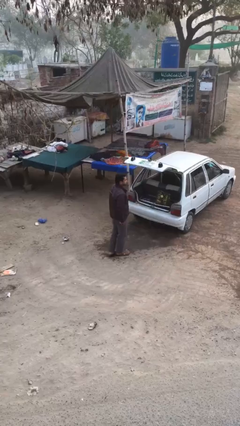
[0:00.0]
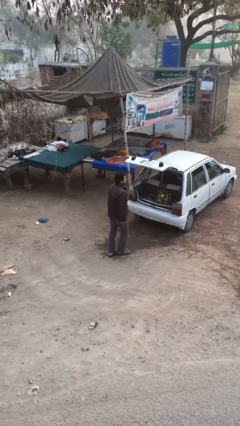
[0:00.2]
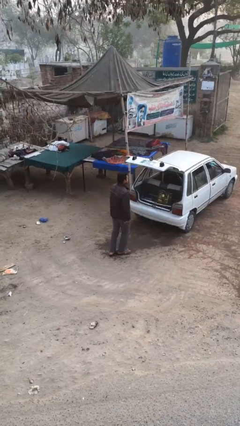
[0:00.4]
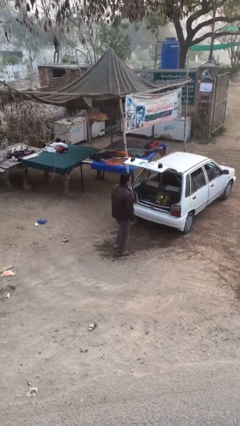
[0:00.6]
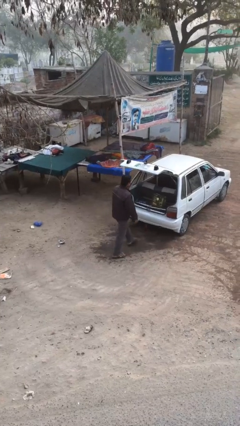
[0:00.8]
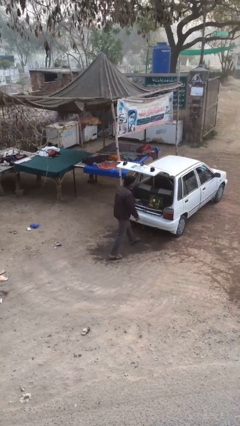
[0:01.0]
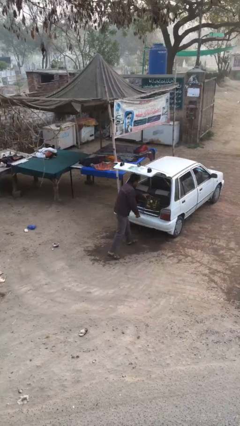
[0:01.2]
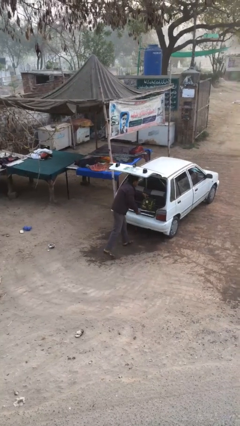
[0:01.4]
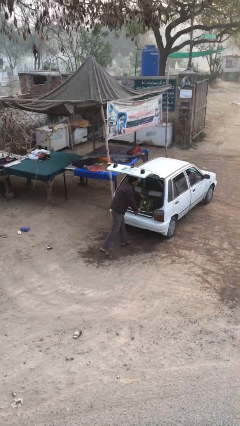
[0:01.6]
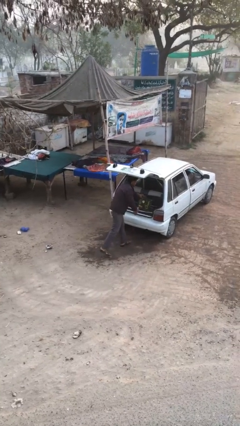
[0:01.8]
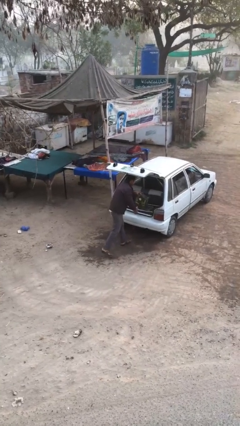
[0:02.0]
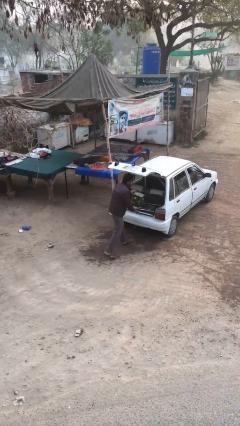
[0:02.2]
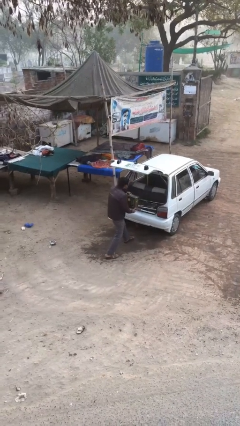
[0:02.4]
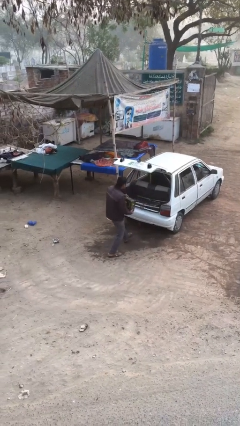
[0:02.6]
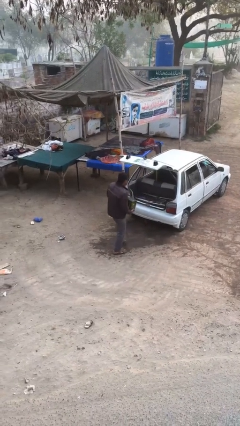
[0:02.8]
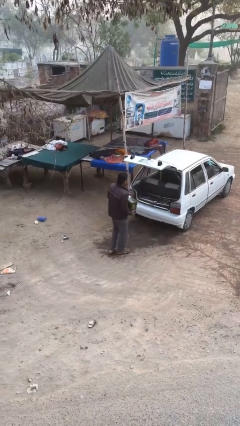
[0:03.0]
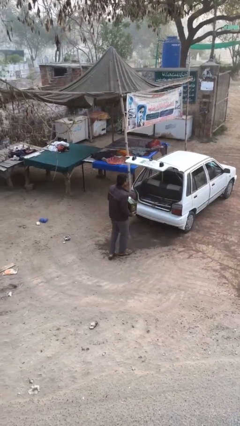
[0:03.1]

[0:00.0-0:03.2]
person unloads car

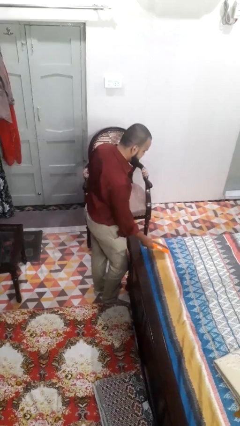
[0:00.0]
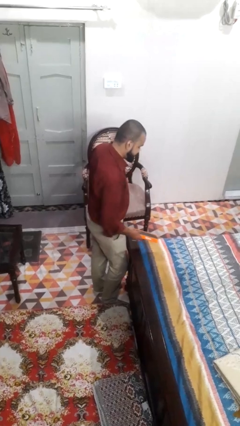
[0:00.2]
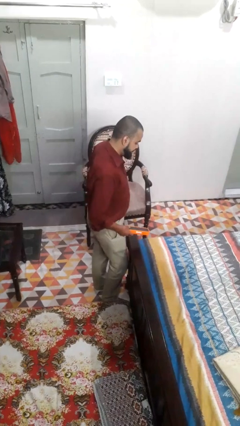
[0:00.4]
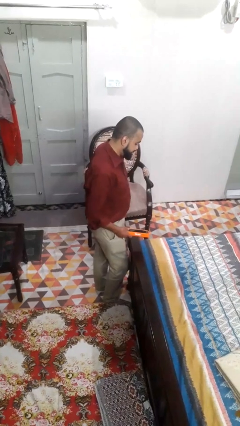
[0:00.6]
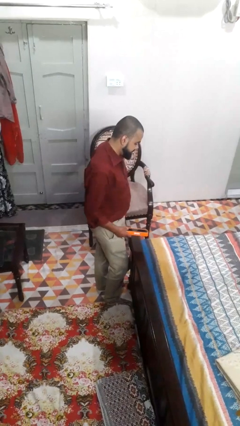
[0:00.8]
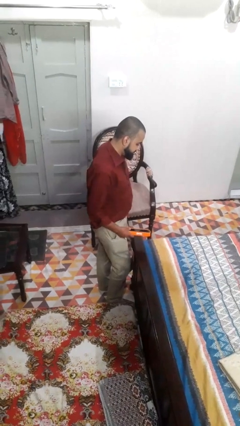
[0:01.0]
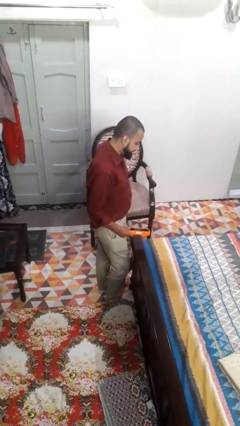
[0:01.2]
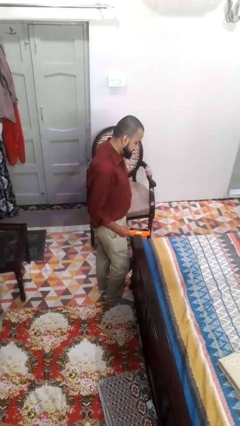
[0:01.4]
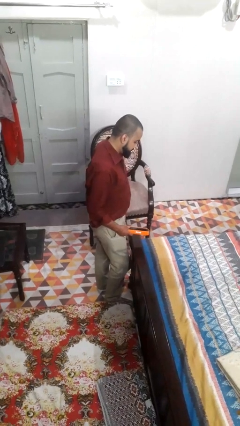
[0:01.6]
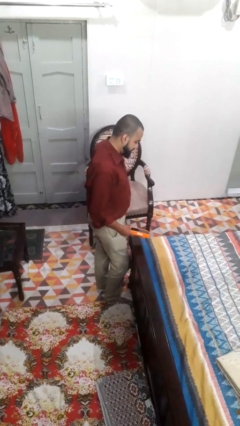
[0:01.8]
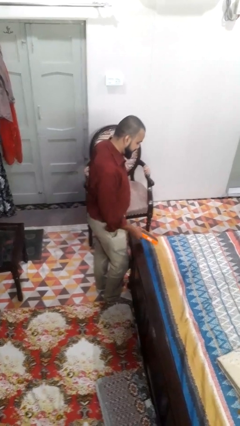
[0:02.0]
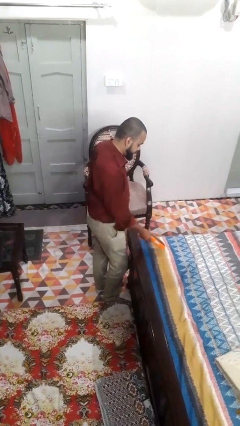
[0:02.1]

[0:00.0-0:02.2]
person picks up object from bed

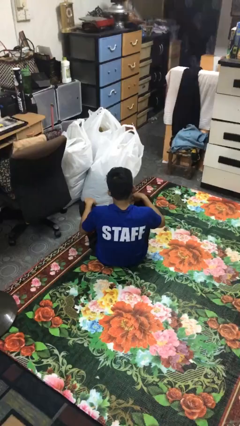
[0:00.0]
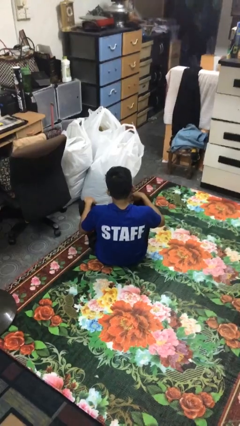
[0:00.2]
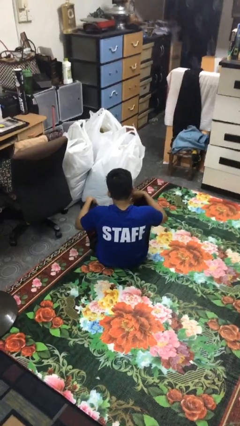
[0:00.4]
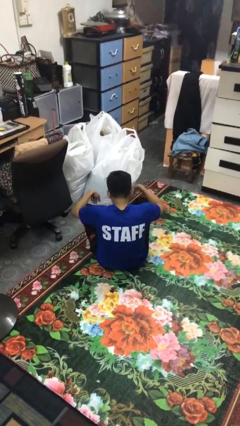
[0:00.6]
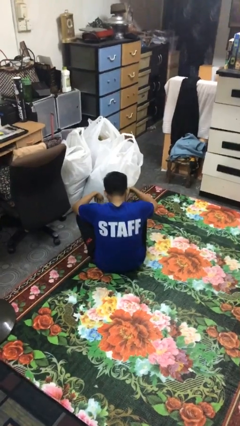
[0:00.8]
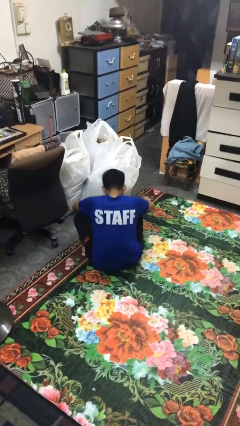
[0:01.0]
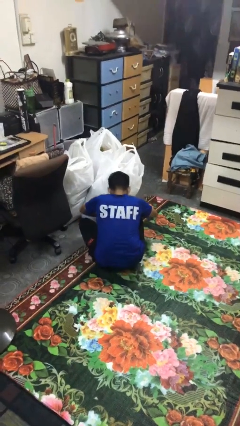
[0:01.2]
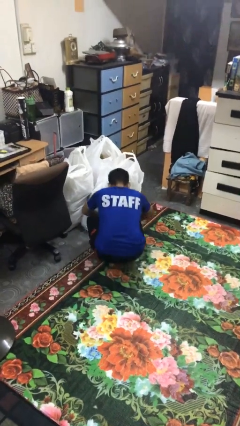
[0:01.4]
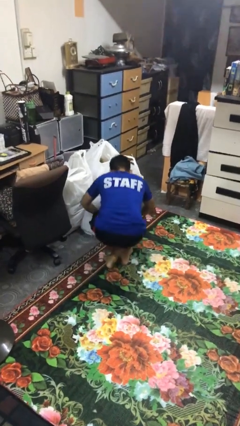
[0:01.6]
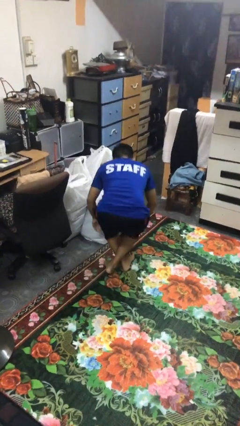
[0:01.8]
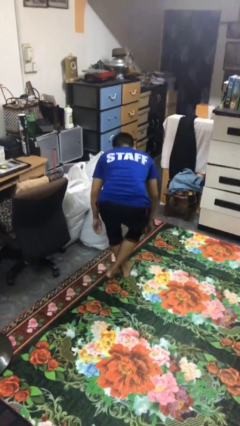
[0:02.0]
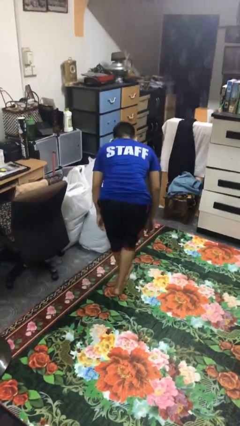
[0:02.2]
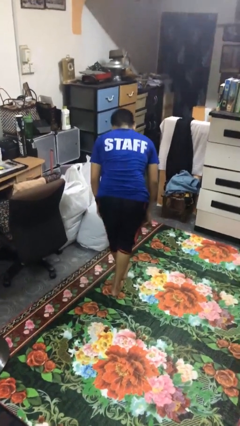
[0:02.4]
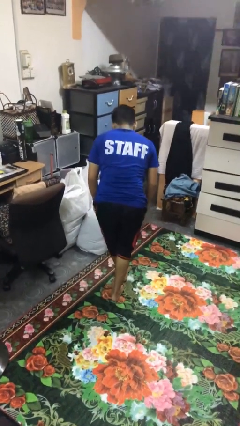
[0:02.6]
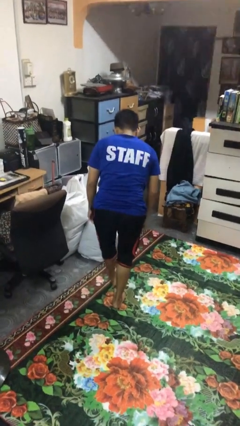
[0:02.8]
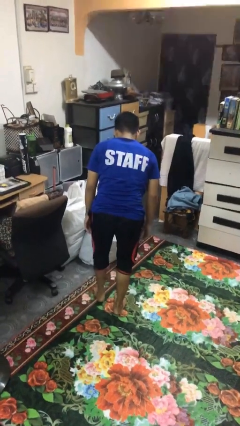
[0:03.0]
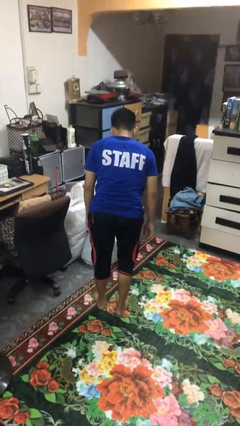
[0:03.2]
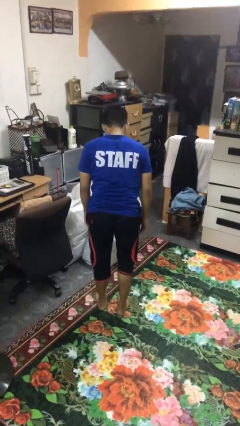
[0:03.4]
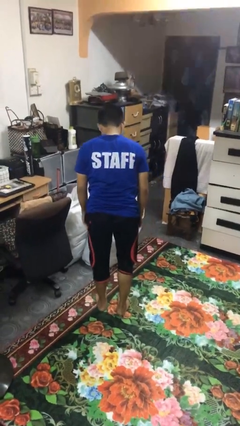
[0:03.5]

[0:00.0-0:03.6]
person stands up from floor

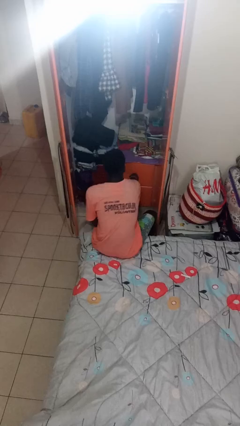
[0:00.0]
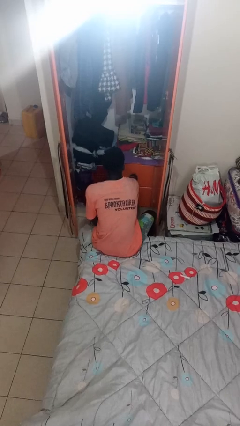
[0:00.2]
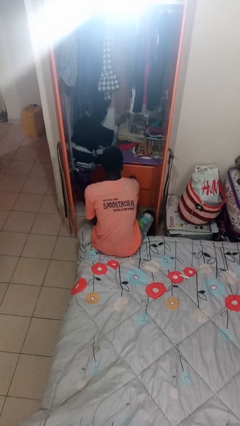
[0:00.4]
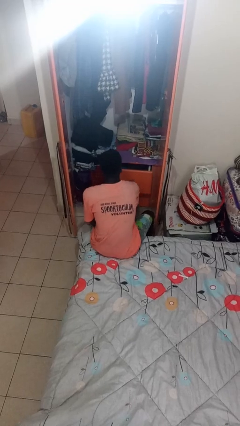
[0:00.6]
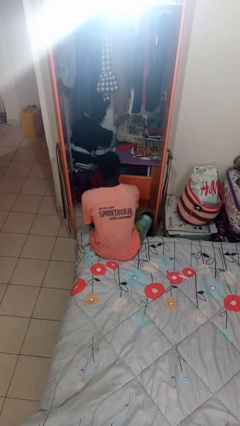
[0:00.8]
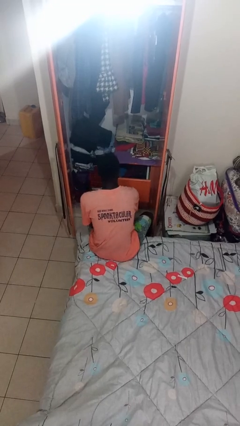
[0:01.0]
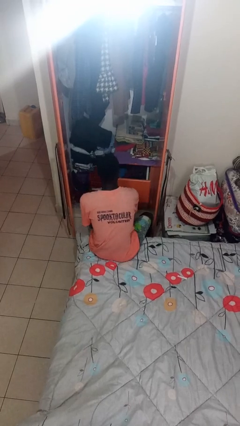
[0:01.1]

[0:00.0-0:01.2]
person opens dresser drawer

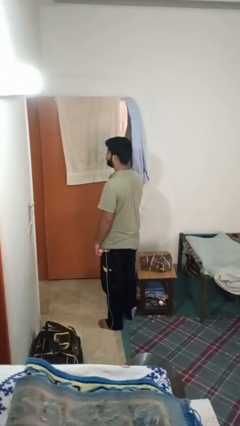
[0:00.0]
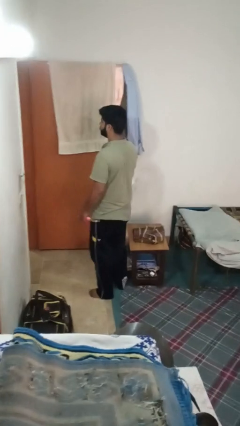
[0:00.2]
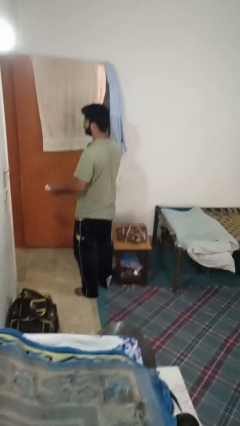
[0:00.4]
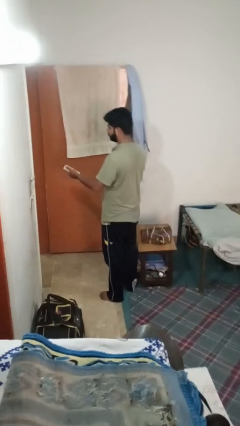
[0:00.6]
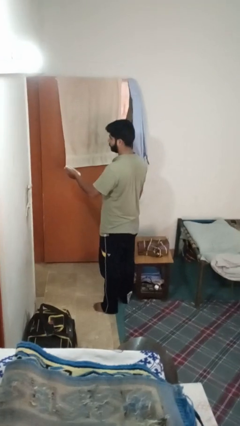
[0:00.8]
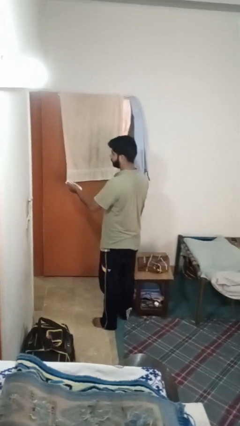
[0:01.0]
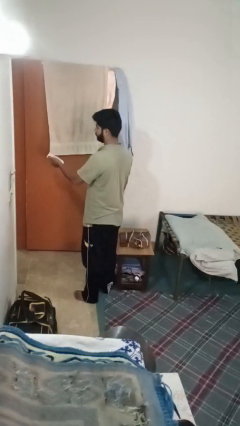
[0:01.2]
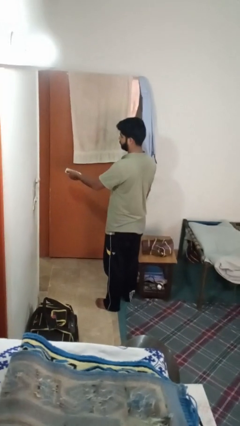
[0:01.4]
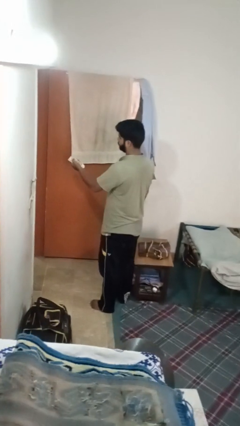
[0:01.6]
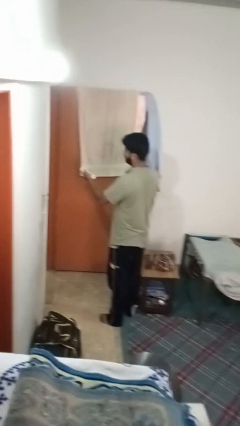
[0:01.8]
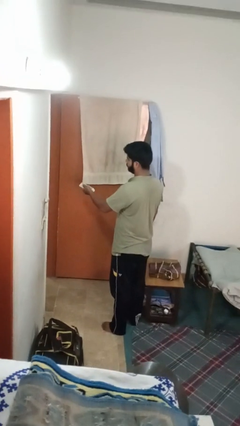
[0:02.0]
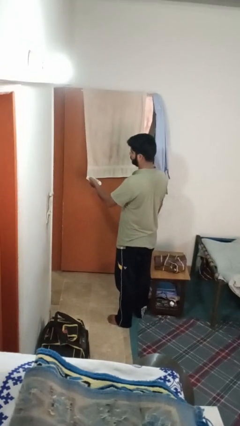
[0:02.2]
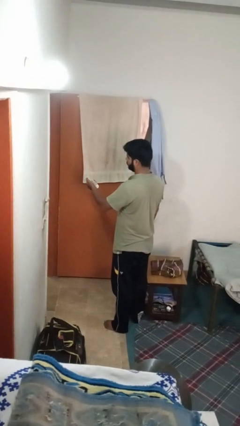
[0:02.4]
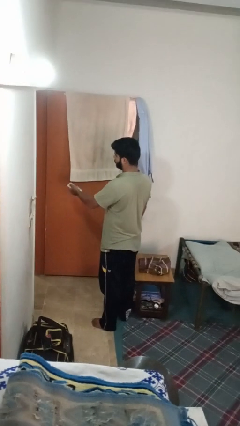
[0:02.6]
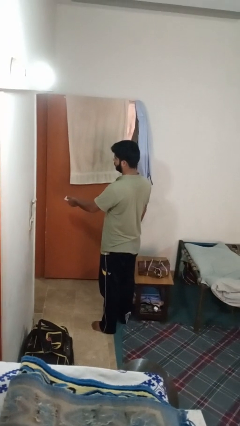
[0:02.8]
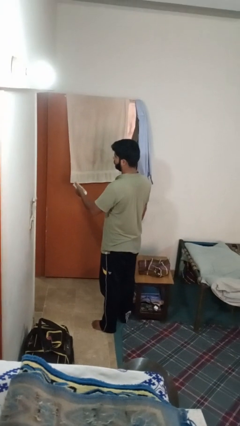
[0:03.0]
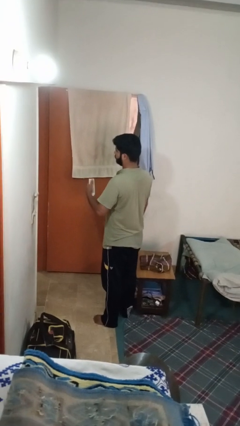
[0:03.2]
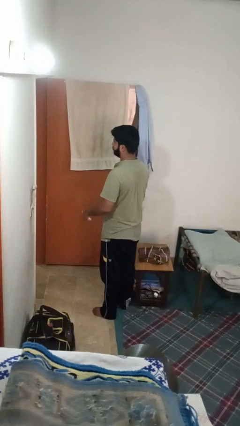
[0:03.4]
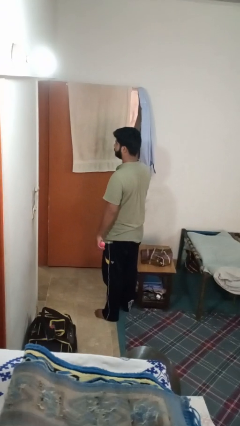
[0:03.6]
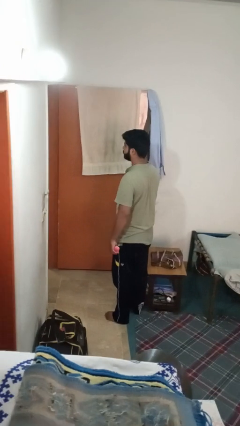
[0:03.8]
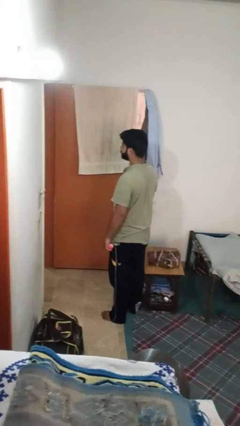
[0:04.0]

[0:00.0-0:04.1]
person uses television remote

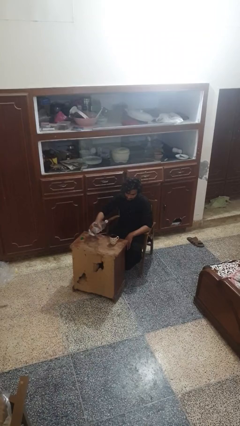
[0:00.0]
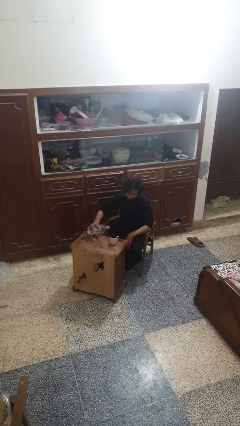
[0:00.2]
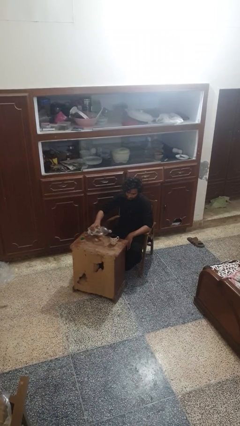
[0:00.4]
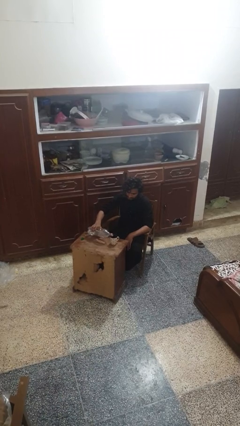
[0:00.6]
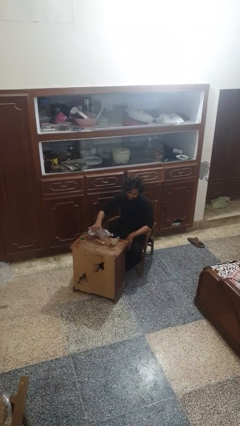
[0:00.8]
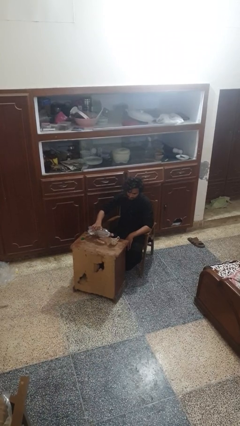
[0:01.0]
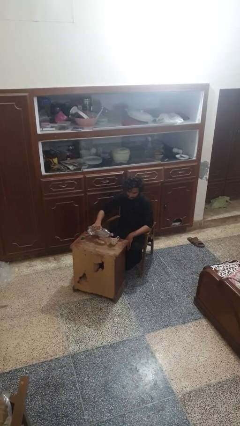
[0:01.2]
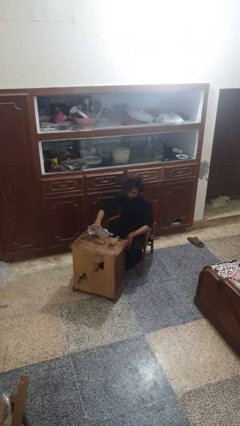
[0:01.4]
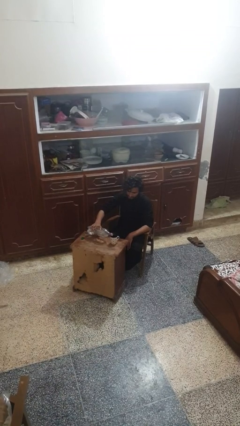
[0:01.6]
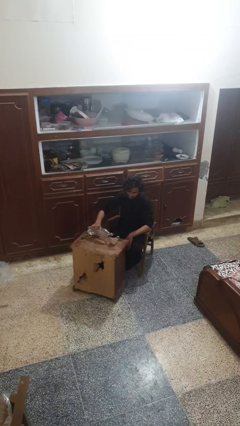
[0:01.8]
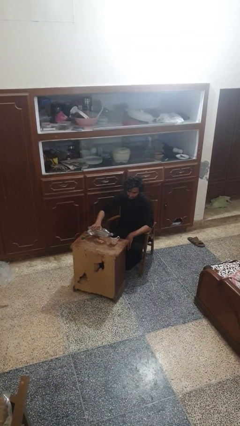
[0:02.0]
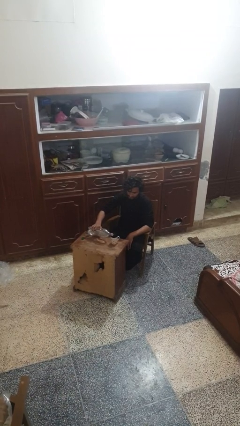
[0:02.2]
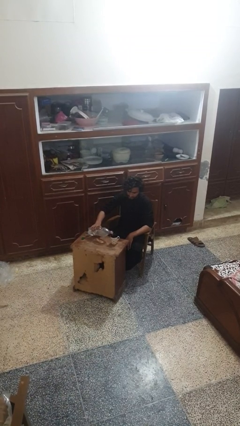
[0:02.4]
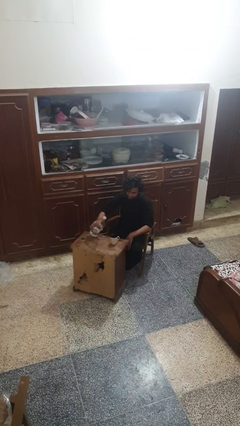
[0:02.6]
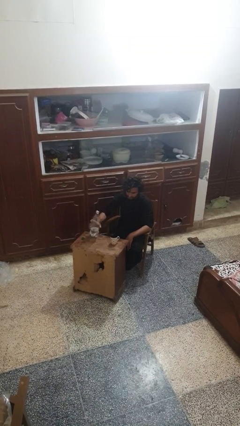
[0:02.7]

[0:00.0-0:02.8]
person pours liquid into cup

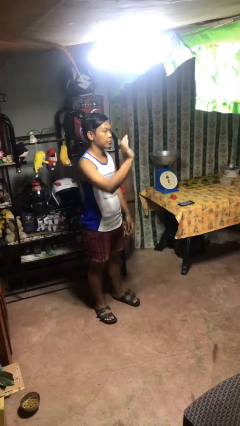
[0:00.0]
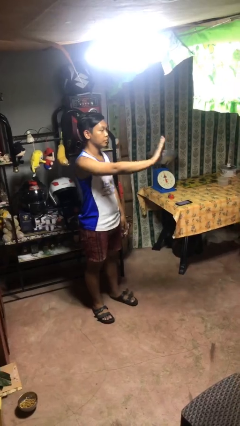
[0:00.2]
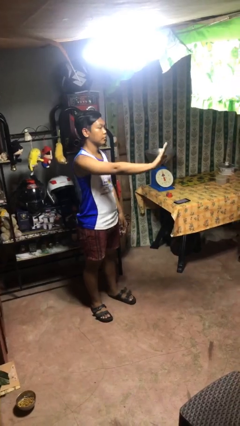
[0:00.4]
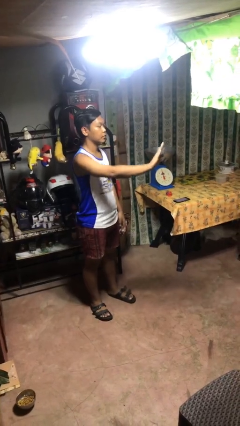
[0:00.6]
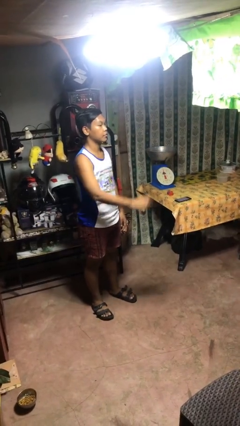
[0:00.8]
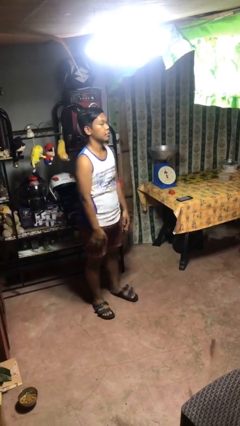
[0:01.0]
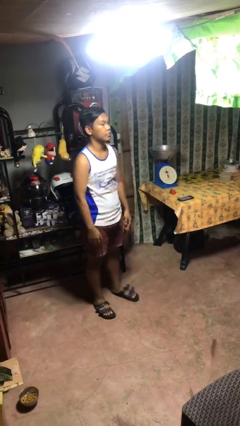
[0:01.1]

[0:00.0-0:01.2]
person gestures stop
